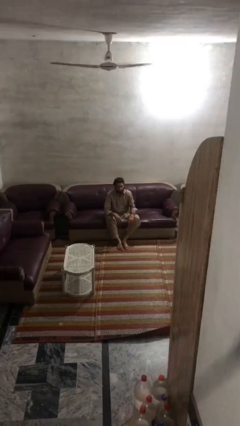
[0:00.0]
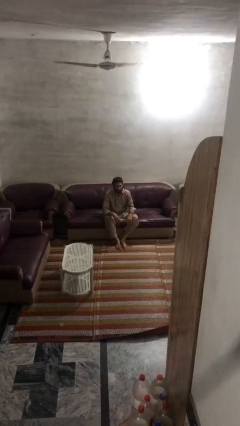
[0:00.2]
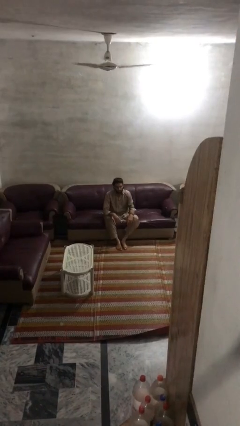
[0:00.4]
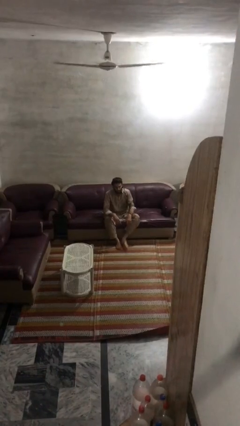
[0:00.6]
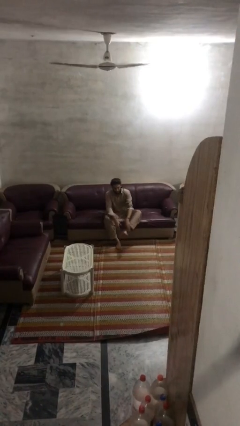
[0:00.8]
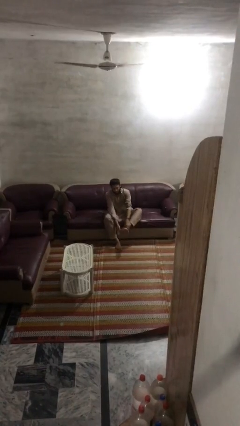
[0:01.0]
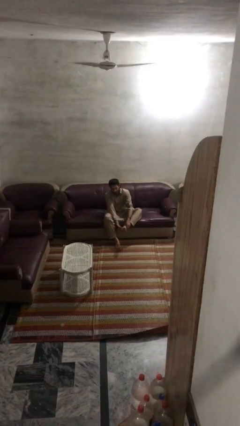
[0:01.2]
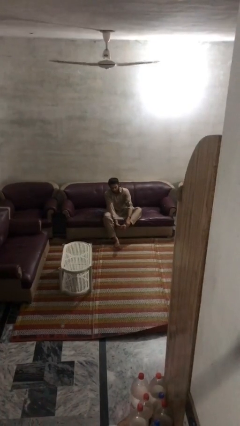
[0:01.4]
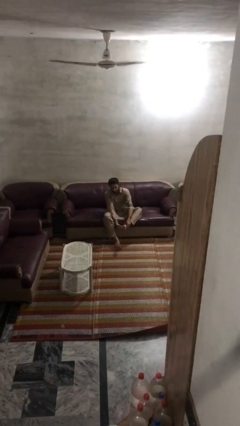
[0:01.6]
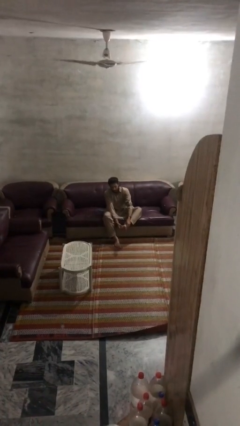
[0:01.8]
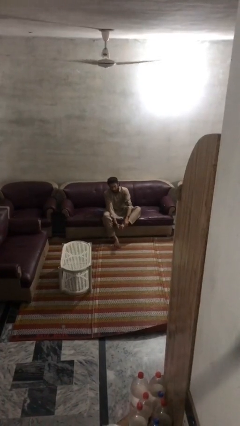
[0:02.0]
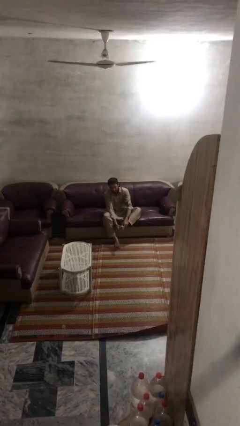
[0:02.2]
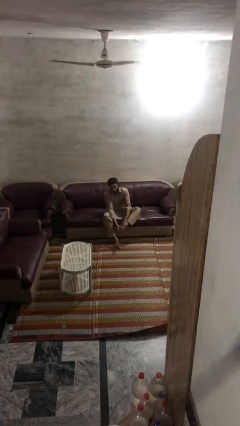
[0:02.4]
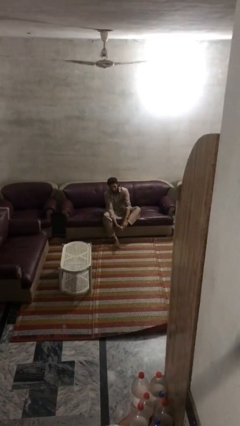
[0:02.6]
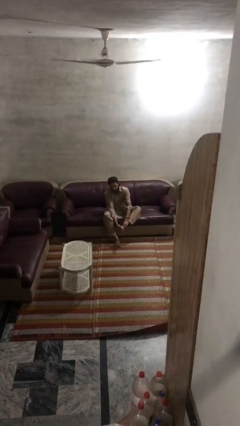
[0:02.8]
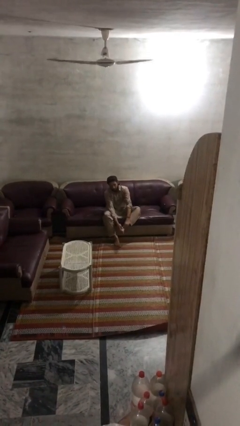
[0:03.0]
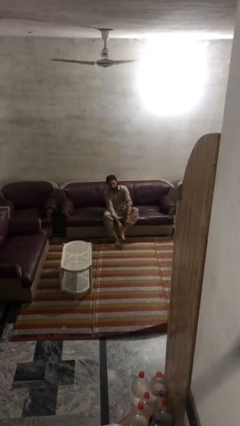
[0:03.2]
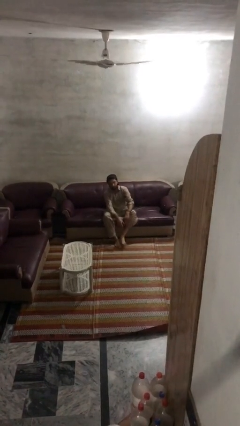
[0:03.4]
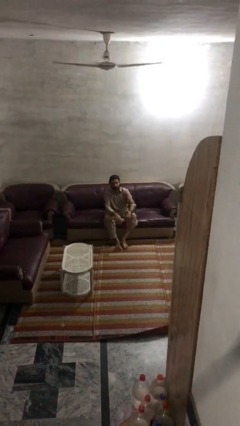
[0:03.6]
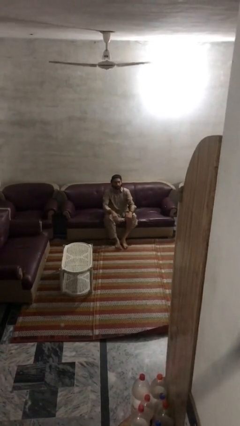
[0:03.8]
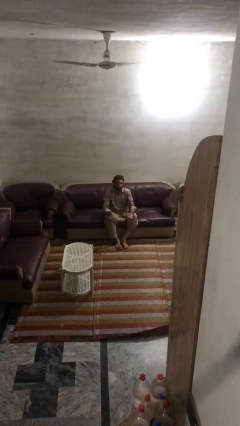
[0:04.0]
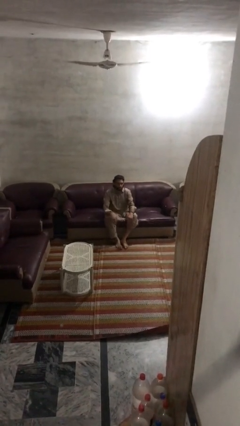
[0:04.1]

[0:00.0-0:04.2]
person rubs foot

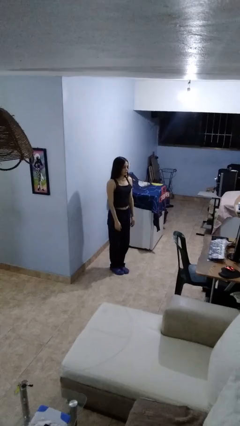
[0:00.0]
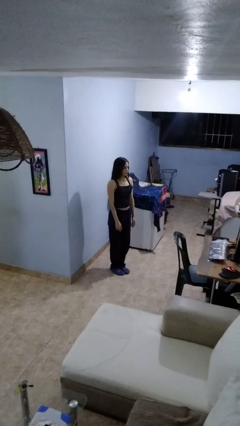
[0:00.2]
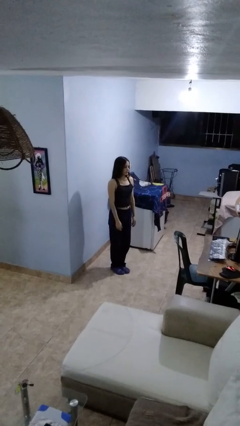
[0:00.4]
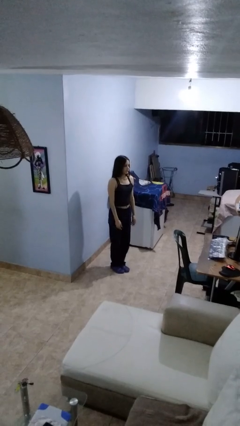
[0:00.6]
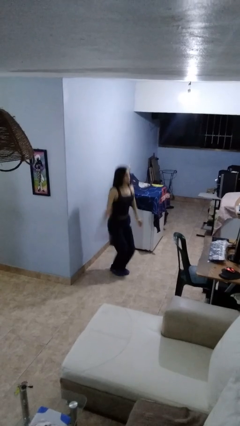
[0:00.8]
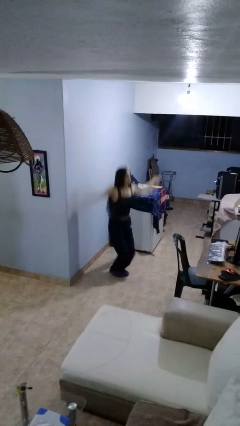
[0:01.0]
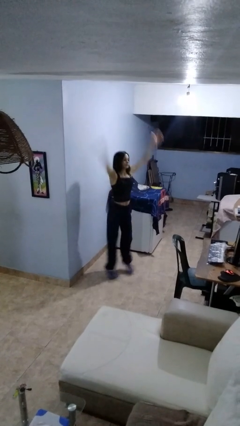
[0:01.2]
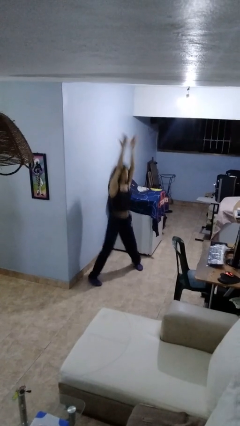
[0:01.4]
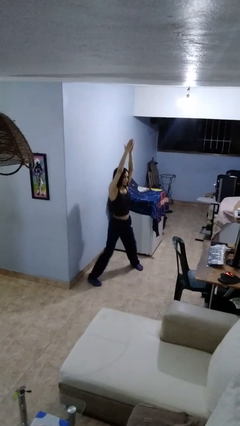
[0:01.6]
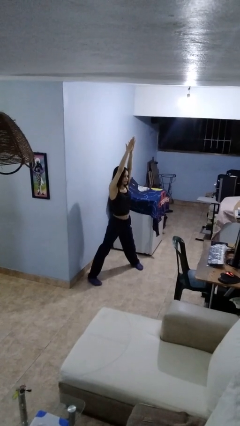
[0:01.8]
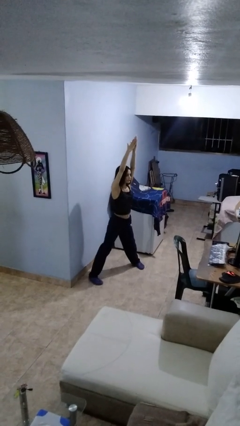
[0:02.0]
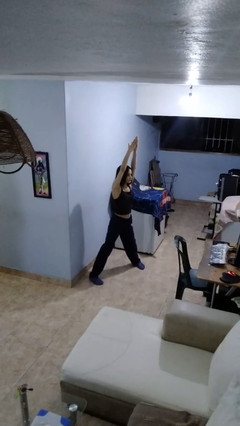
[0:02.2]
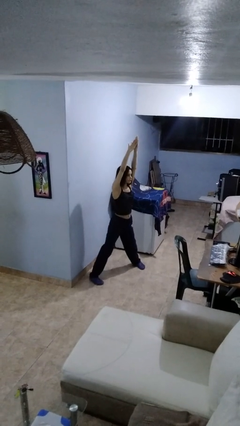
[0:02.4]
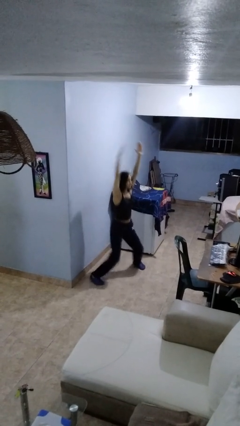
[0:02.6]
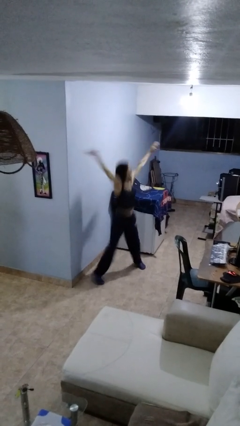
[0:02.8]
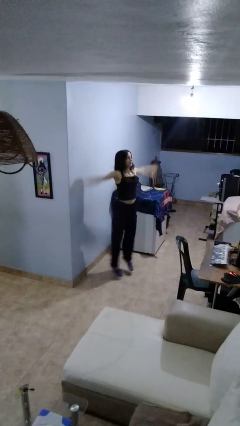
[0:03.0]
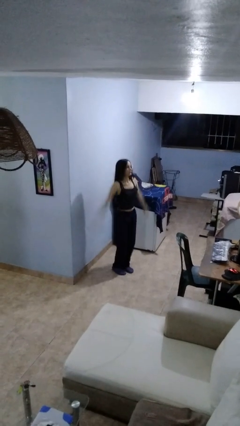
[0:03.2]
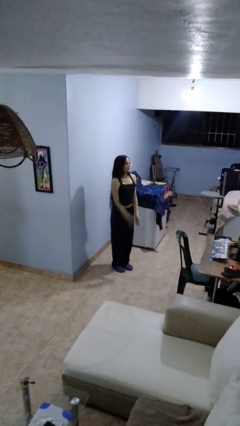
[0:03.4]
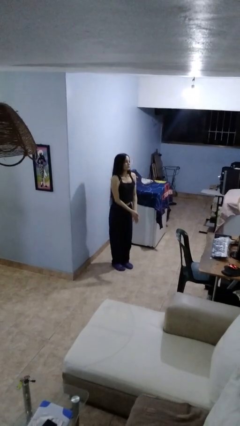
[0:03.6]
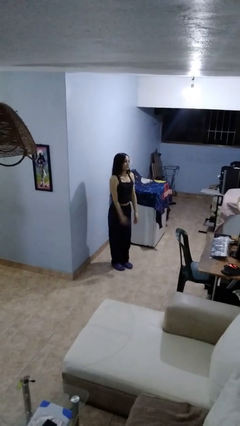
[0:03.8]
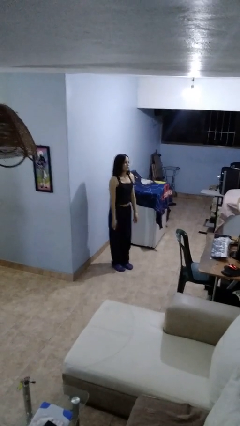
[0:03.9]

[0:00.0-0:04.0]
person exercises with jumping jacks

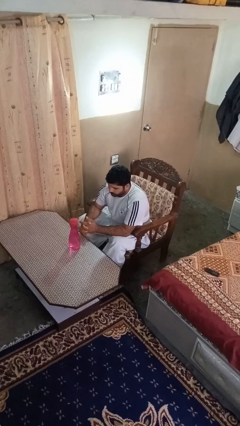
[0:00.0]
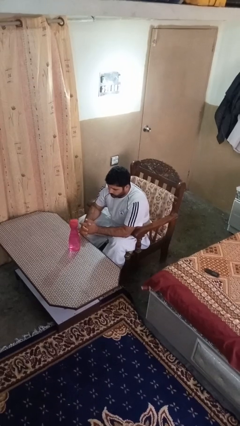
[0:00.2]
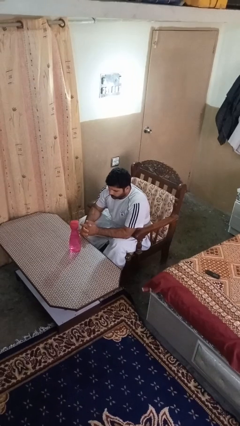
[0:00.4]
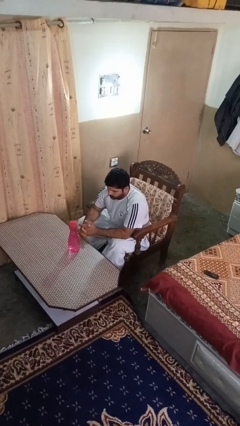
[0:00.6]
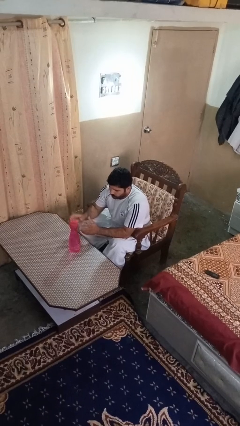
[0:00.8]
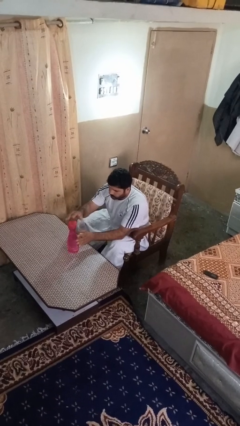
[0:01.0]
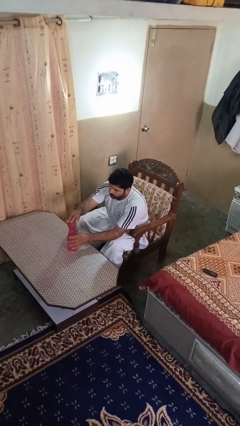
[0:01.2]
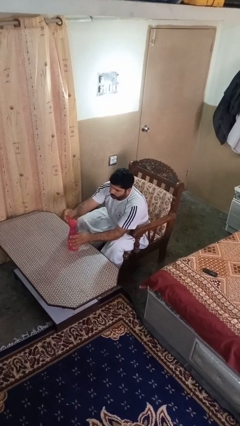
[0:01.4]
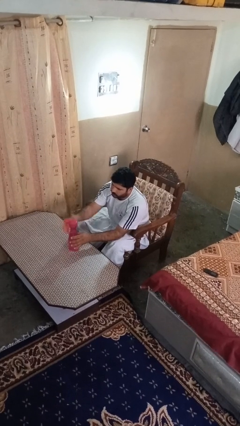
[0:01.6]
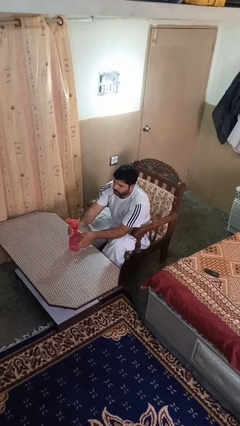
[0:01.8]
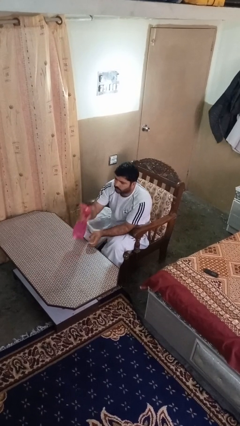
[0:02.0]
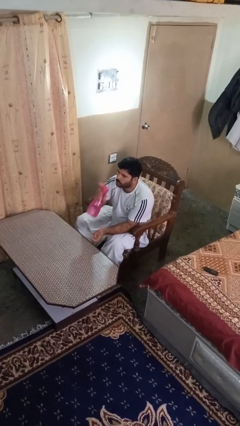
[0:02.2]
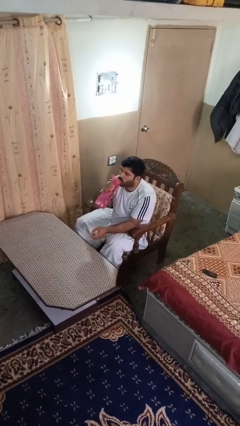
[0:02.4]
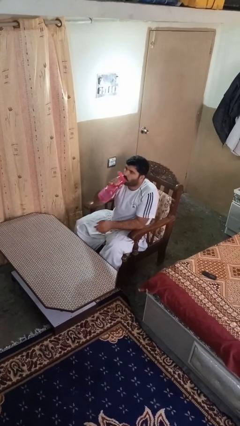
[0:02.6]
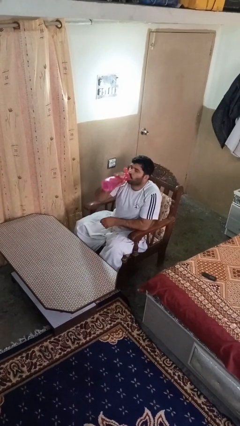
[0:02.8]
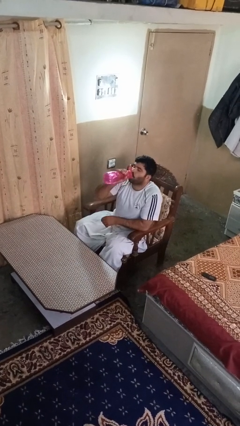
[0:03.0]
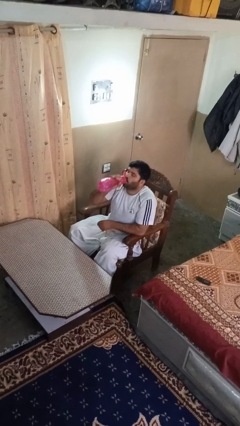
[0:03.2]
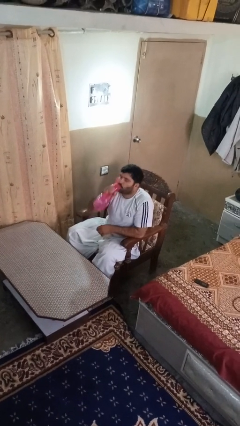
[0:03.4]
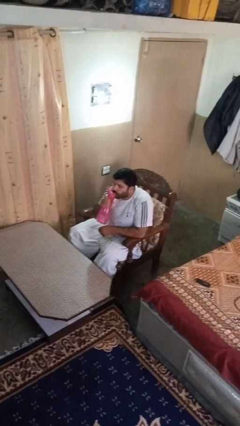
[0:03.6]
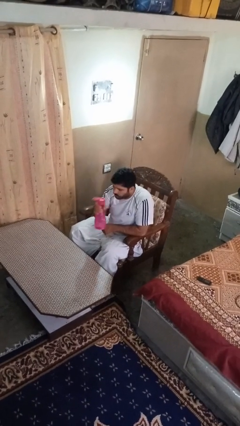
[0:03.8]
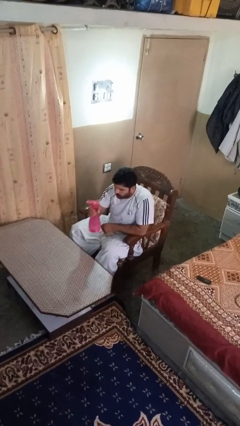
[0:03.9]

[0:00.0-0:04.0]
person drinks from bottle

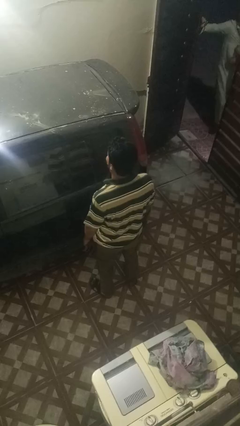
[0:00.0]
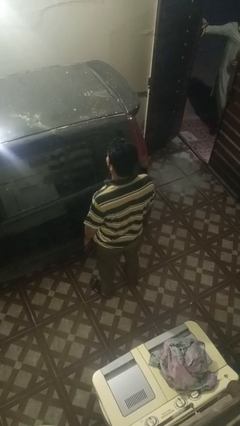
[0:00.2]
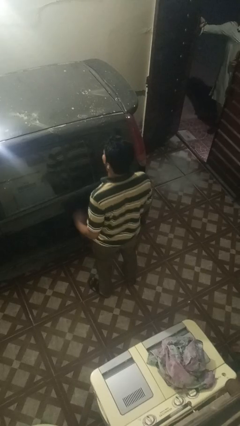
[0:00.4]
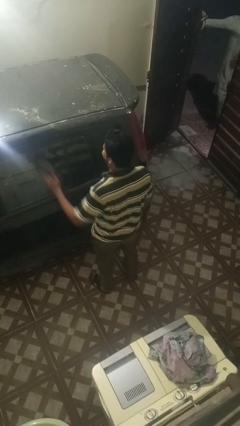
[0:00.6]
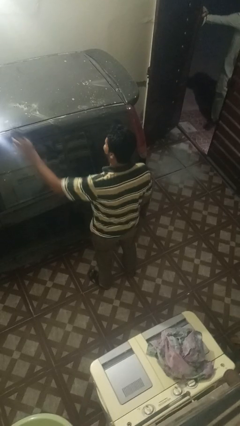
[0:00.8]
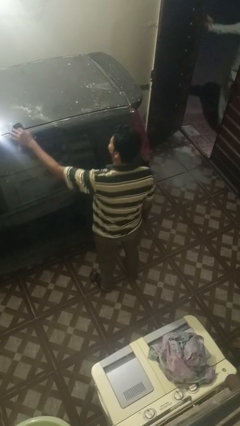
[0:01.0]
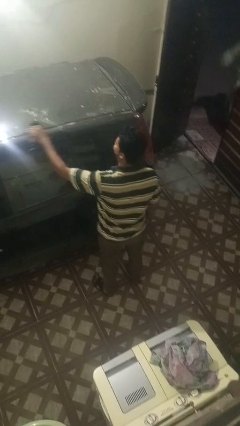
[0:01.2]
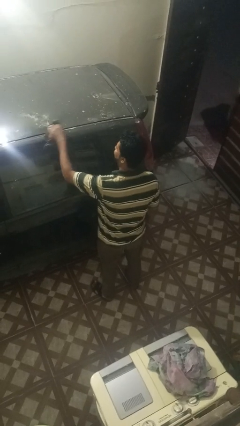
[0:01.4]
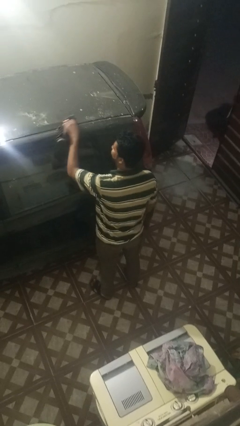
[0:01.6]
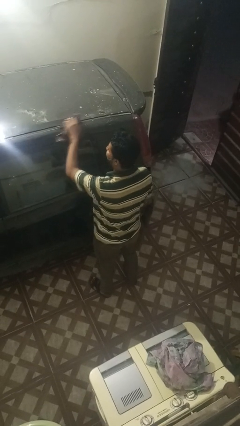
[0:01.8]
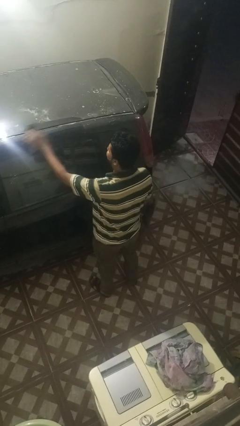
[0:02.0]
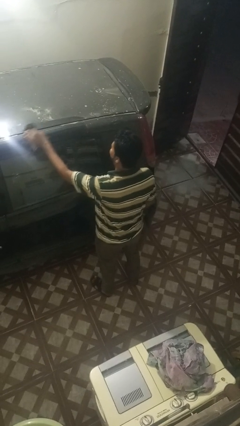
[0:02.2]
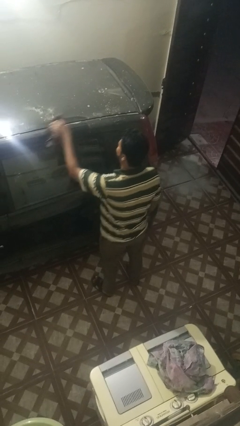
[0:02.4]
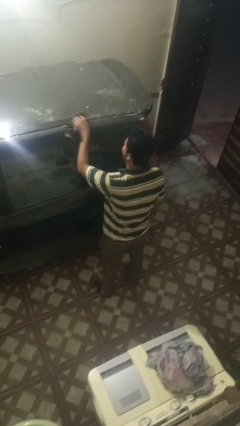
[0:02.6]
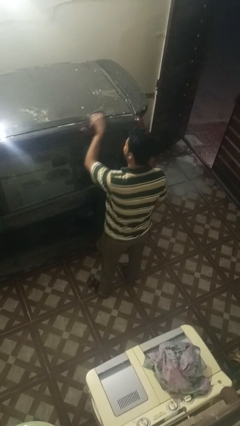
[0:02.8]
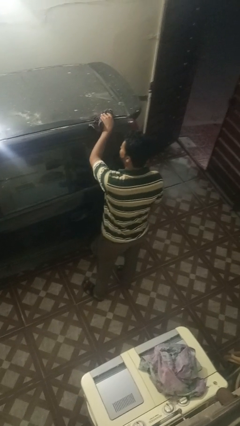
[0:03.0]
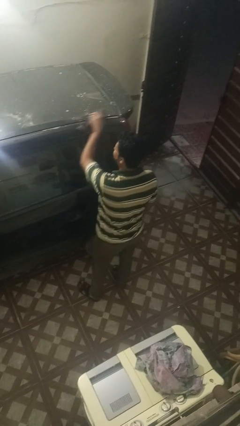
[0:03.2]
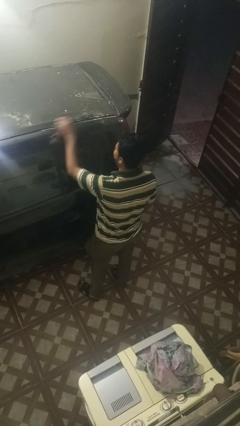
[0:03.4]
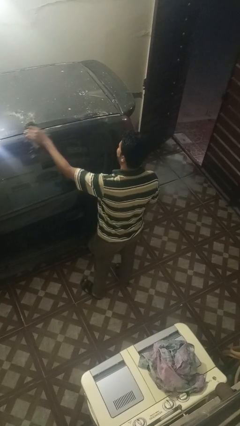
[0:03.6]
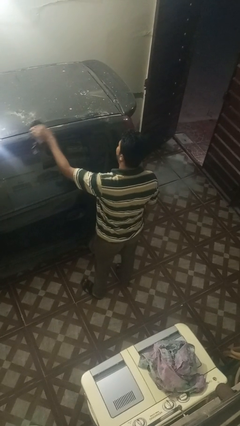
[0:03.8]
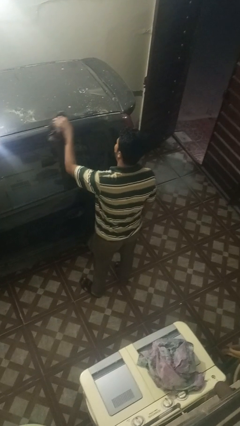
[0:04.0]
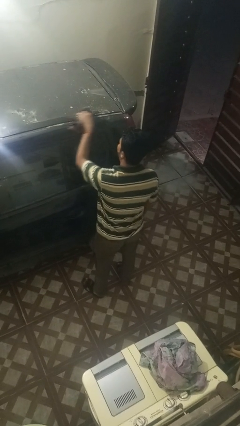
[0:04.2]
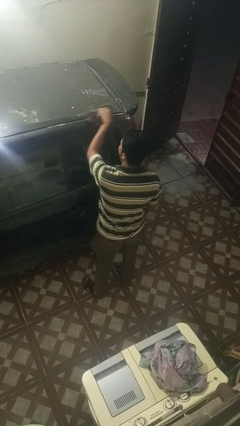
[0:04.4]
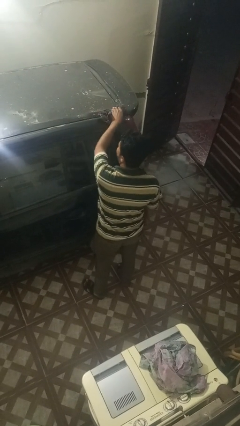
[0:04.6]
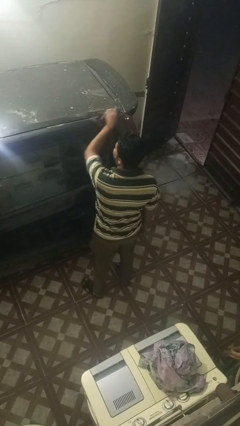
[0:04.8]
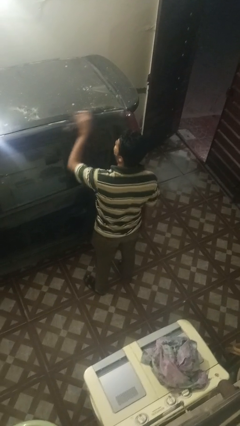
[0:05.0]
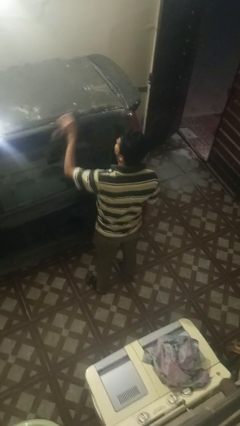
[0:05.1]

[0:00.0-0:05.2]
person polishes car with rag

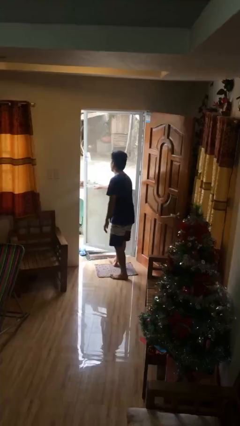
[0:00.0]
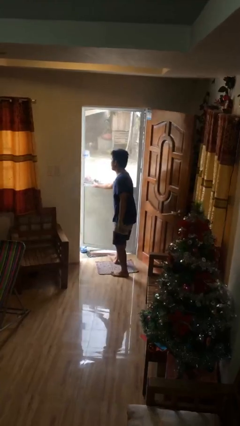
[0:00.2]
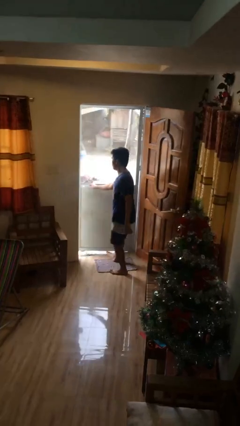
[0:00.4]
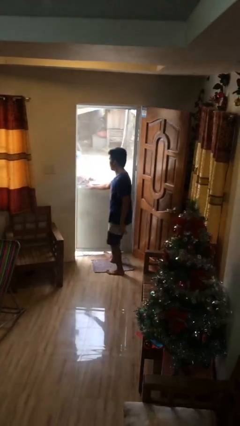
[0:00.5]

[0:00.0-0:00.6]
person closes facility door
